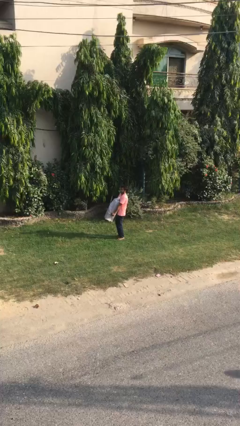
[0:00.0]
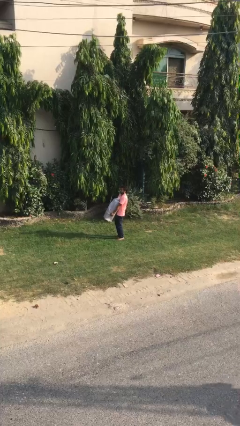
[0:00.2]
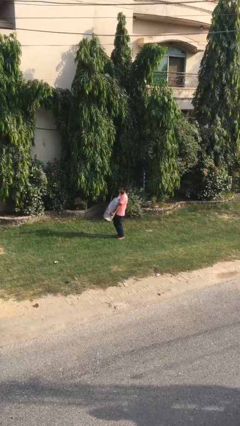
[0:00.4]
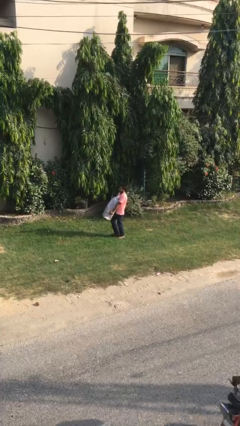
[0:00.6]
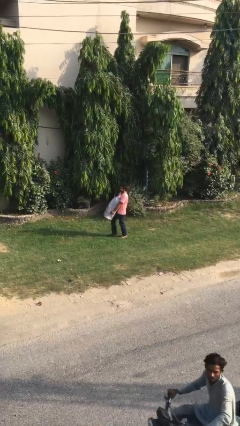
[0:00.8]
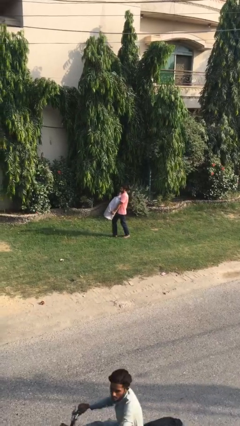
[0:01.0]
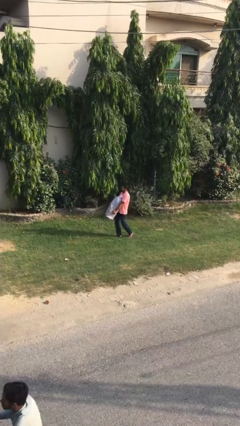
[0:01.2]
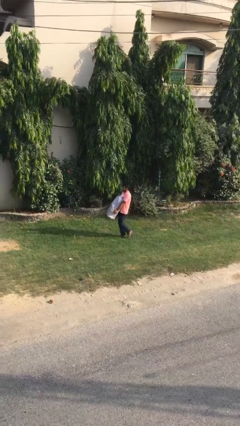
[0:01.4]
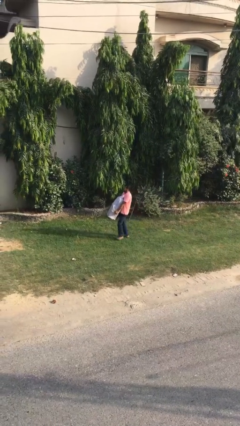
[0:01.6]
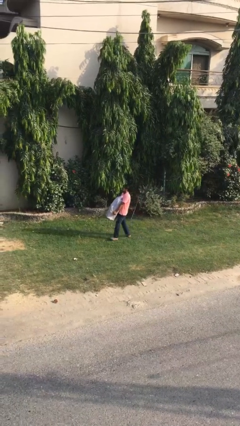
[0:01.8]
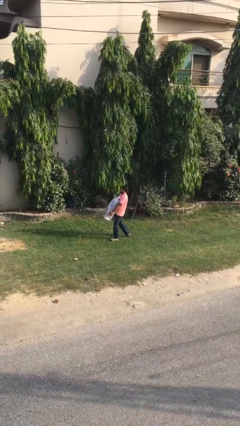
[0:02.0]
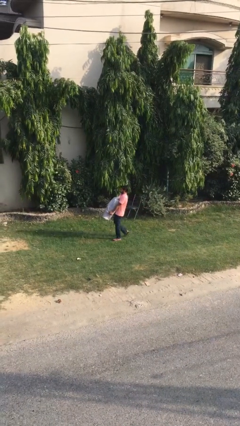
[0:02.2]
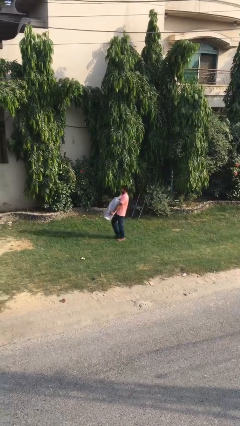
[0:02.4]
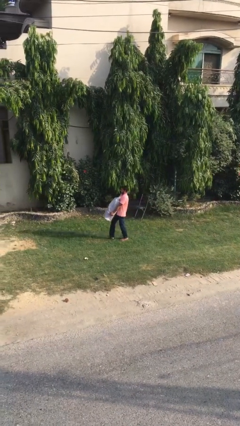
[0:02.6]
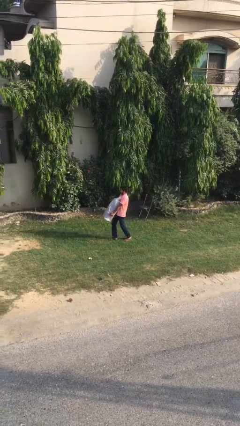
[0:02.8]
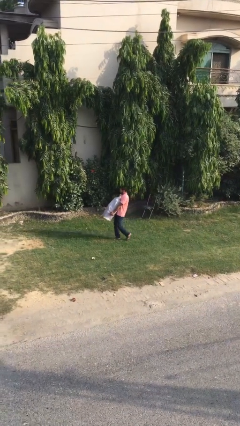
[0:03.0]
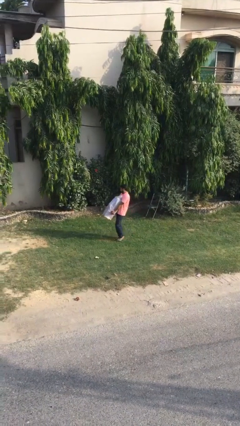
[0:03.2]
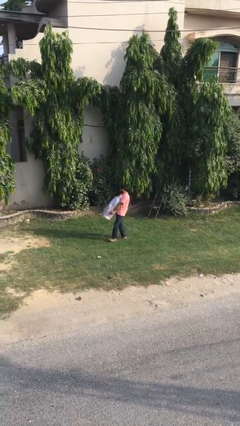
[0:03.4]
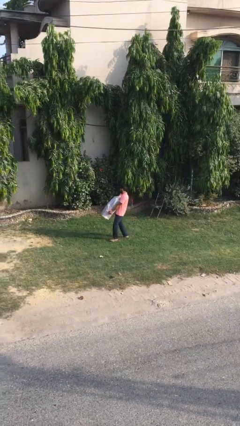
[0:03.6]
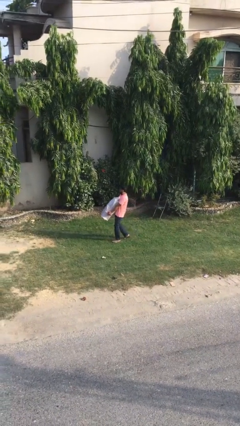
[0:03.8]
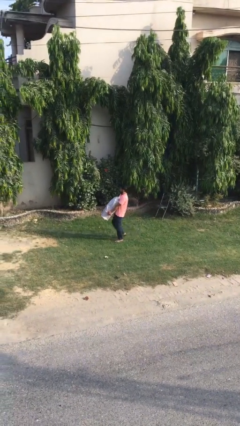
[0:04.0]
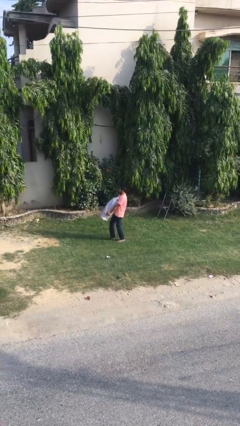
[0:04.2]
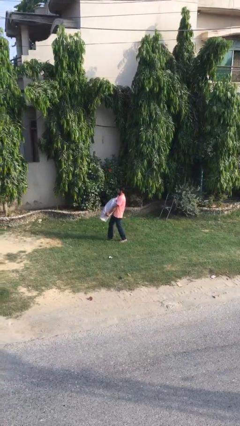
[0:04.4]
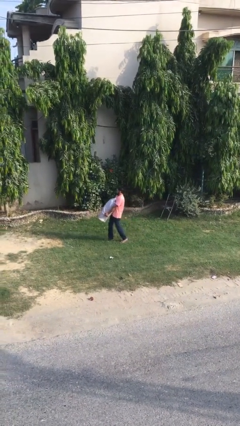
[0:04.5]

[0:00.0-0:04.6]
person carries heavy object

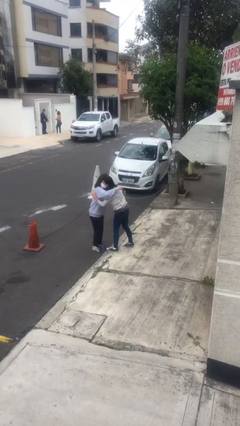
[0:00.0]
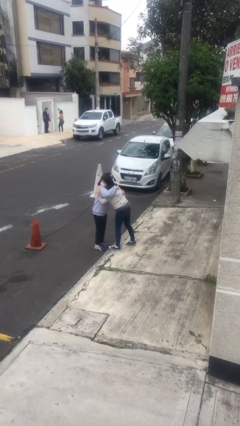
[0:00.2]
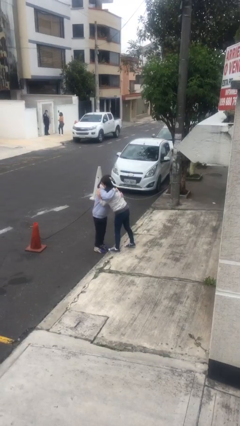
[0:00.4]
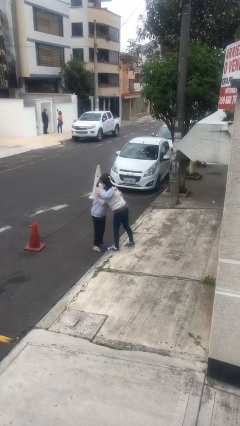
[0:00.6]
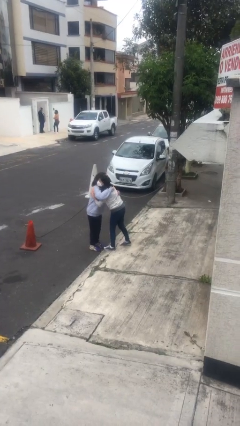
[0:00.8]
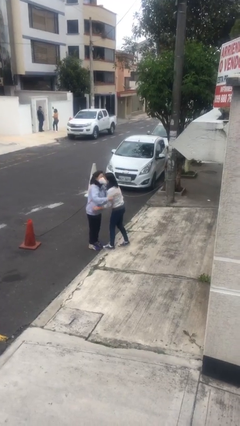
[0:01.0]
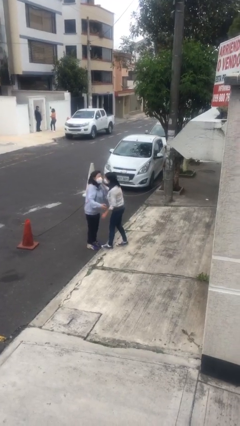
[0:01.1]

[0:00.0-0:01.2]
person embraces person

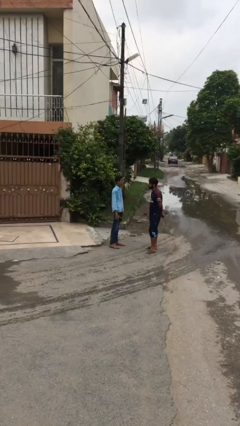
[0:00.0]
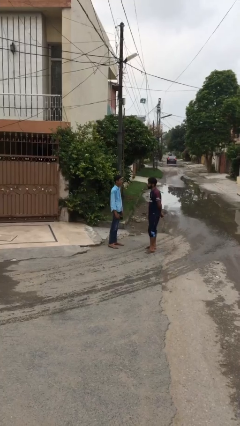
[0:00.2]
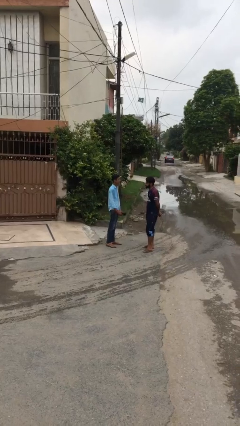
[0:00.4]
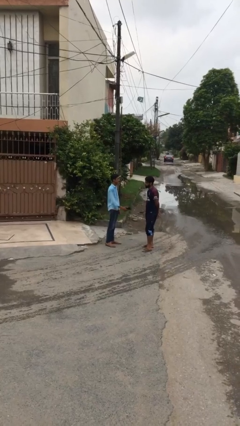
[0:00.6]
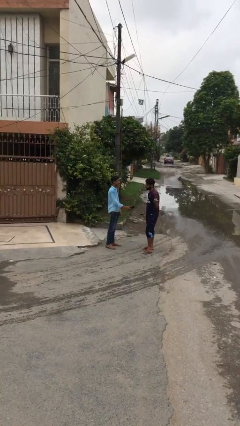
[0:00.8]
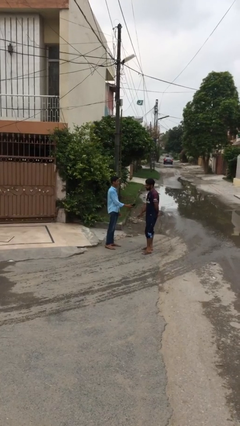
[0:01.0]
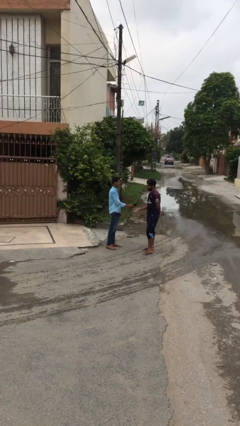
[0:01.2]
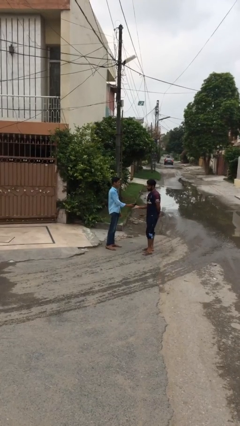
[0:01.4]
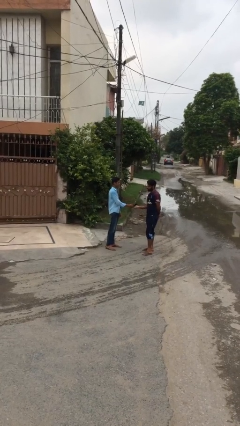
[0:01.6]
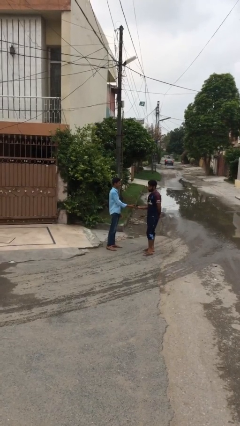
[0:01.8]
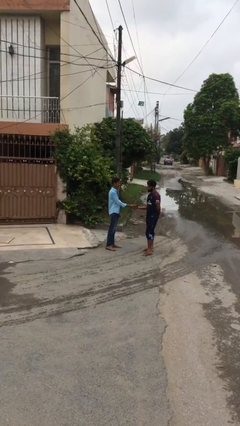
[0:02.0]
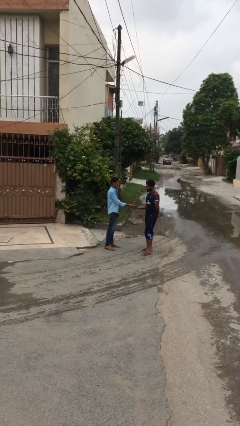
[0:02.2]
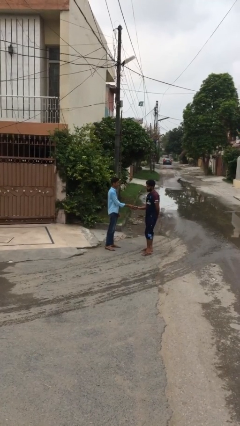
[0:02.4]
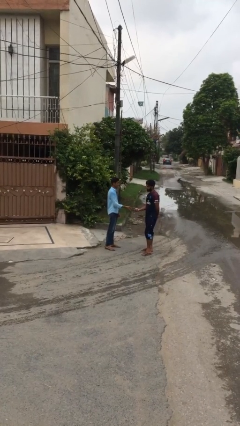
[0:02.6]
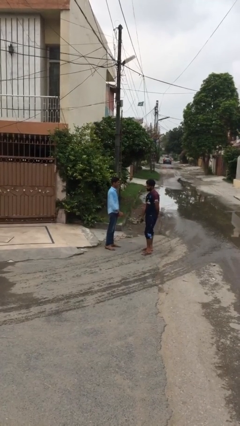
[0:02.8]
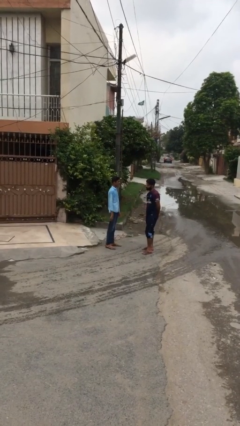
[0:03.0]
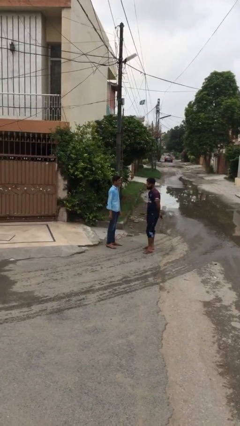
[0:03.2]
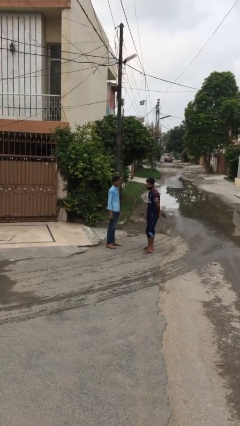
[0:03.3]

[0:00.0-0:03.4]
person transfers object to person

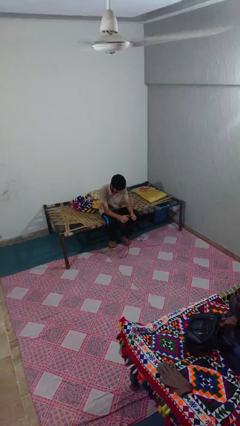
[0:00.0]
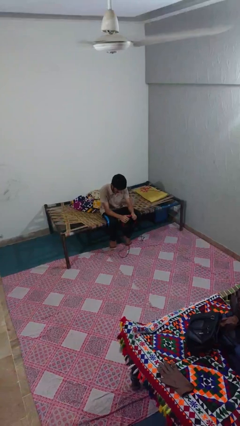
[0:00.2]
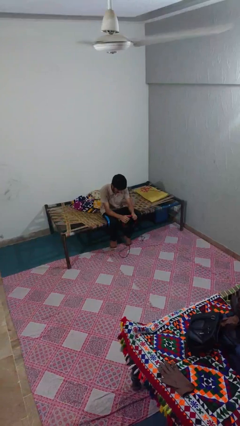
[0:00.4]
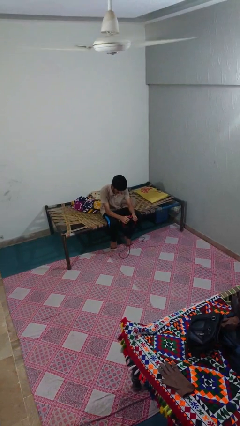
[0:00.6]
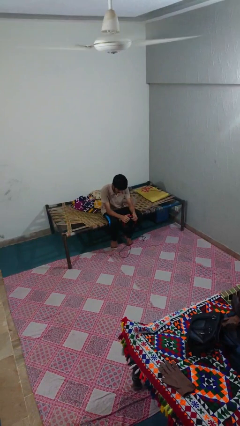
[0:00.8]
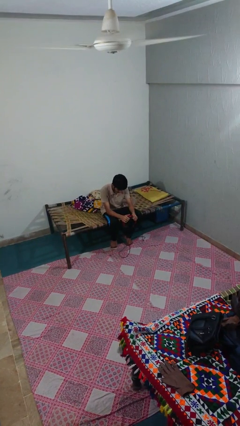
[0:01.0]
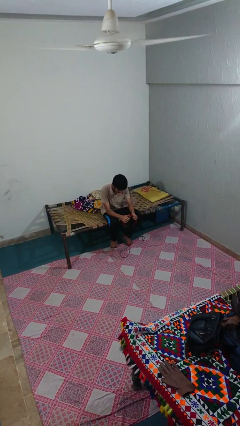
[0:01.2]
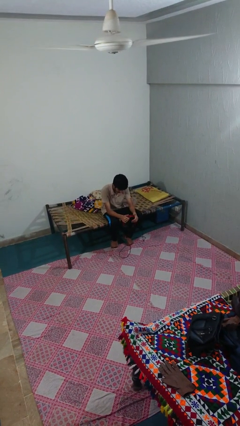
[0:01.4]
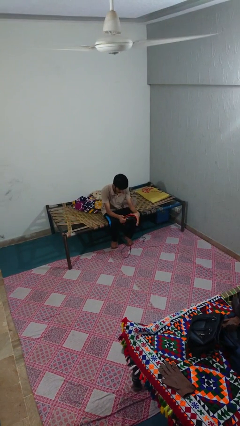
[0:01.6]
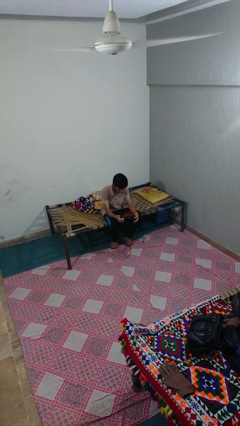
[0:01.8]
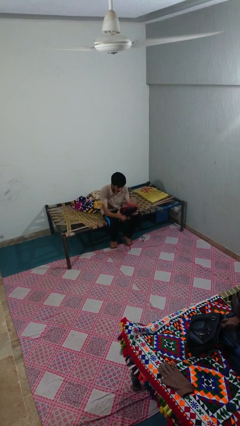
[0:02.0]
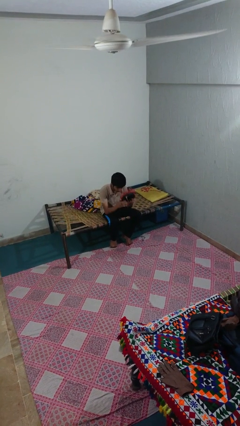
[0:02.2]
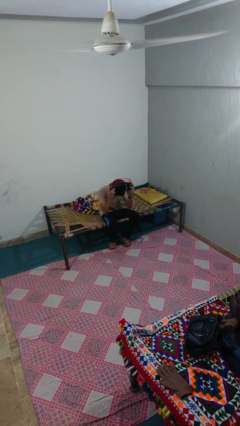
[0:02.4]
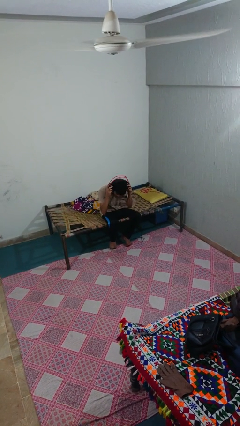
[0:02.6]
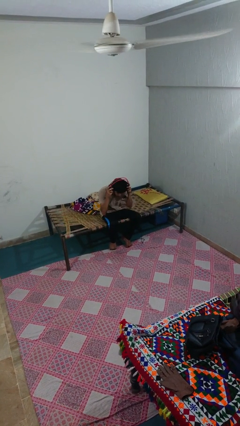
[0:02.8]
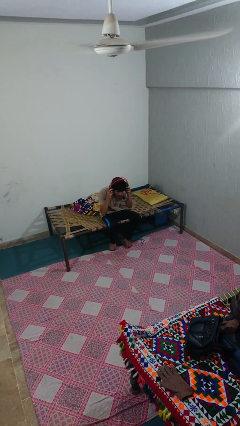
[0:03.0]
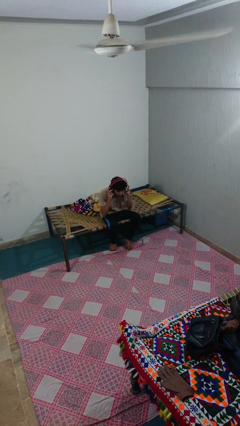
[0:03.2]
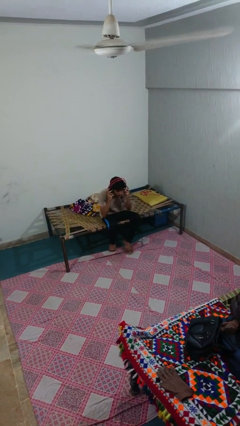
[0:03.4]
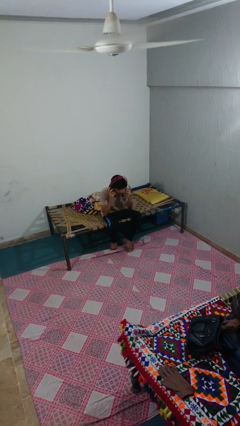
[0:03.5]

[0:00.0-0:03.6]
person puts on headphones

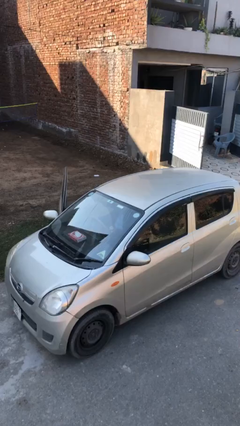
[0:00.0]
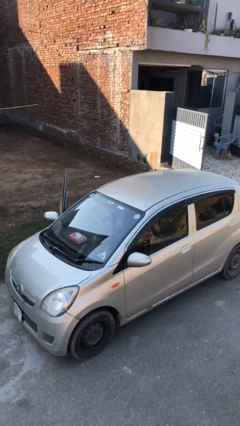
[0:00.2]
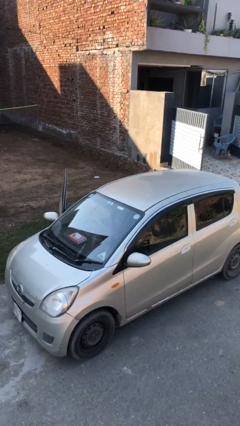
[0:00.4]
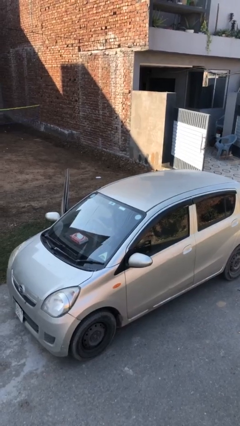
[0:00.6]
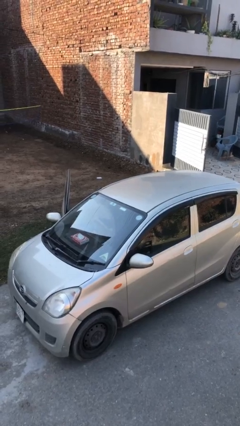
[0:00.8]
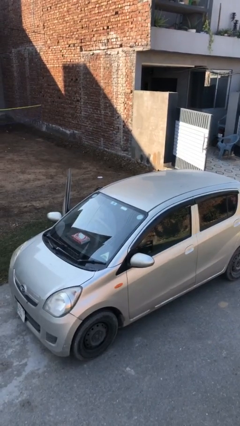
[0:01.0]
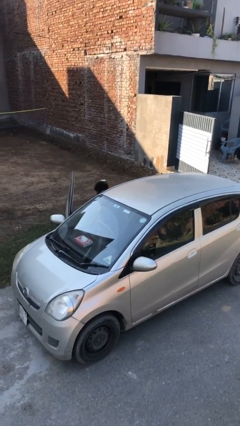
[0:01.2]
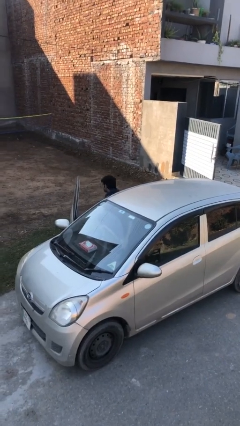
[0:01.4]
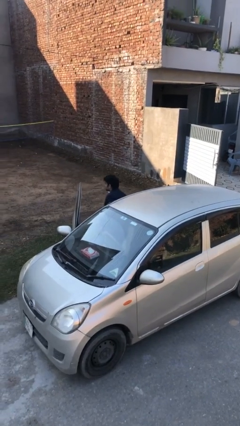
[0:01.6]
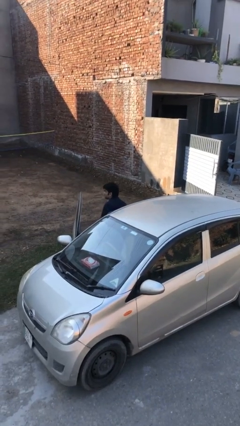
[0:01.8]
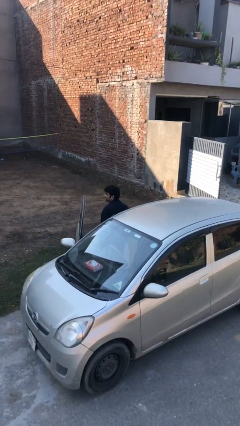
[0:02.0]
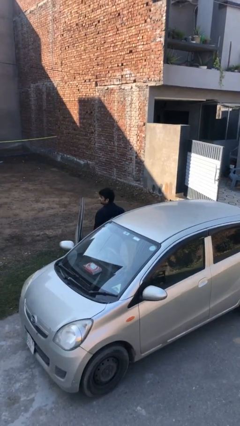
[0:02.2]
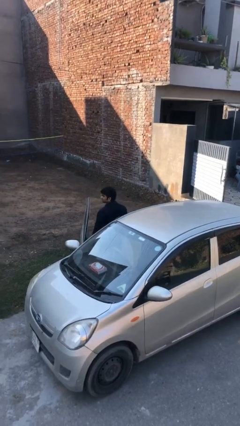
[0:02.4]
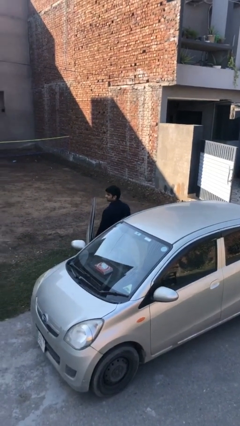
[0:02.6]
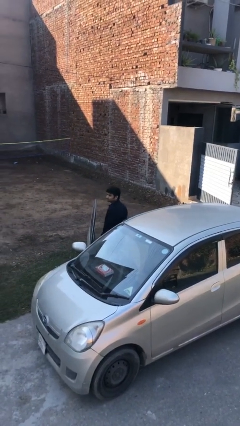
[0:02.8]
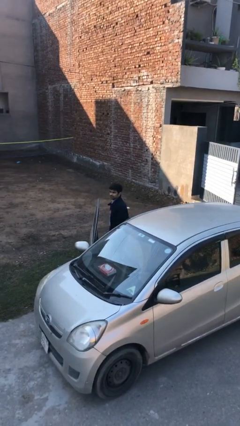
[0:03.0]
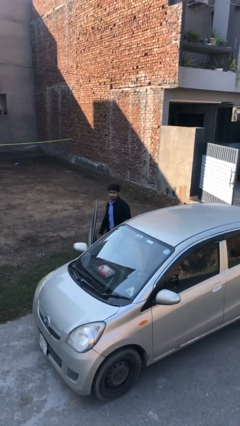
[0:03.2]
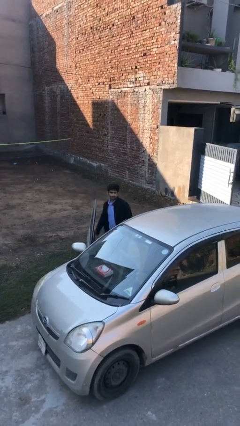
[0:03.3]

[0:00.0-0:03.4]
person exits car

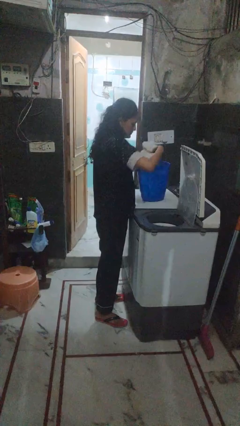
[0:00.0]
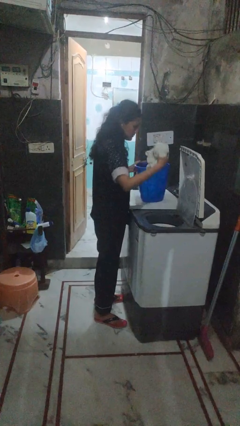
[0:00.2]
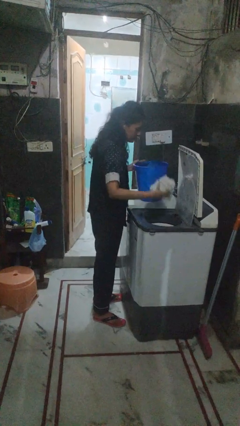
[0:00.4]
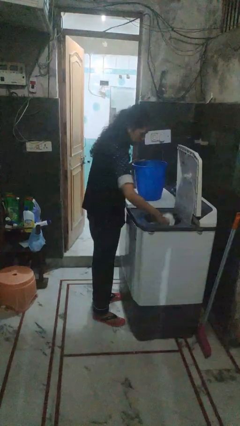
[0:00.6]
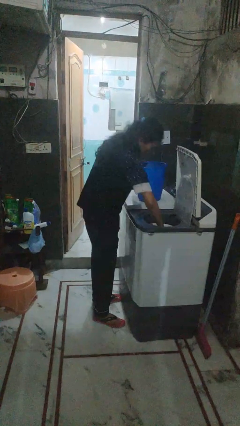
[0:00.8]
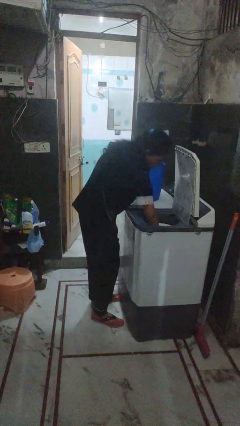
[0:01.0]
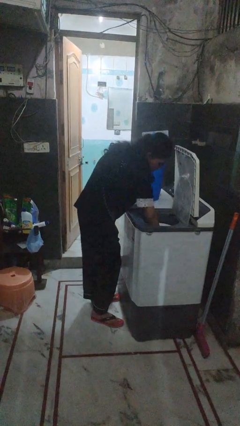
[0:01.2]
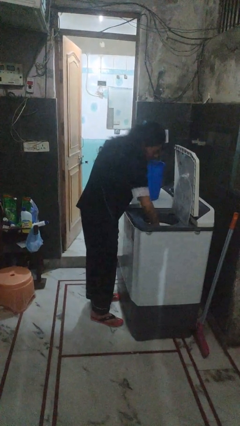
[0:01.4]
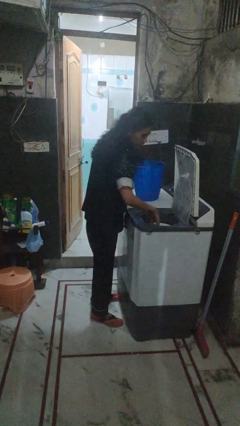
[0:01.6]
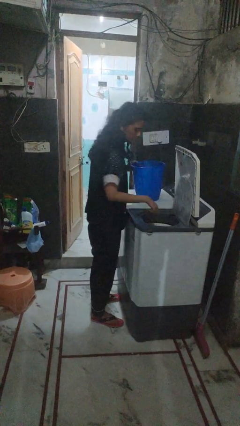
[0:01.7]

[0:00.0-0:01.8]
person loads dryer
